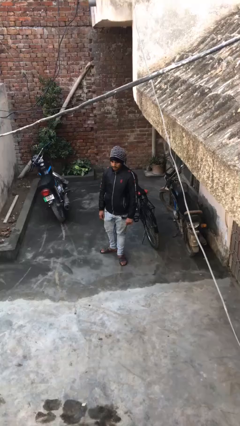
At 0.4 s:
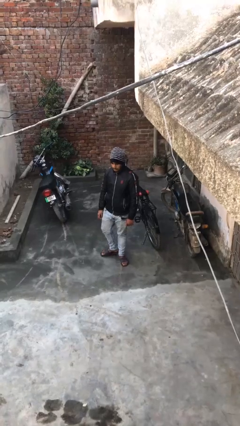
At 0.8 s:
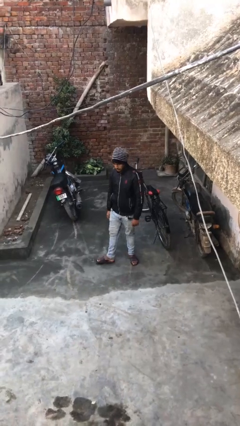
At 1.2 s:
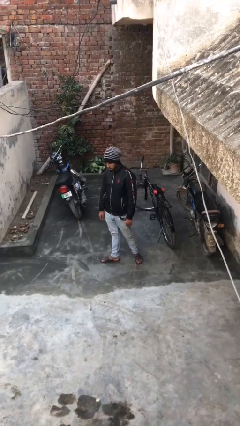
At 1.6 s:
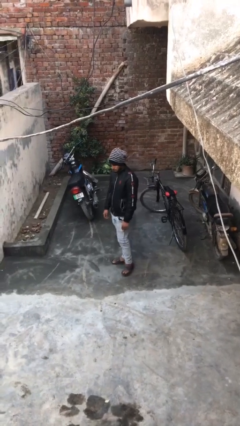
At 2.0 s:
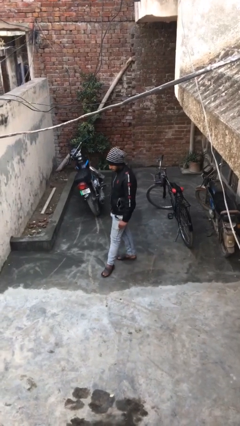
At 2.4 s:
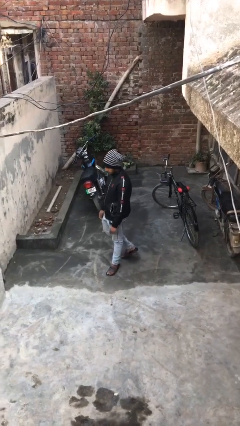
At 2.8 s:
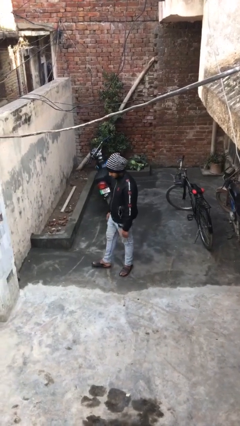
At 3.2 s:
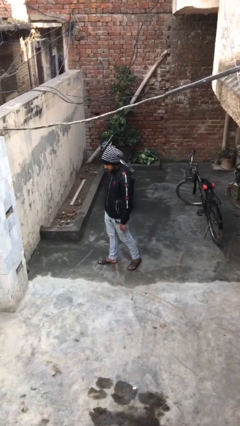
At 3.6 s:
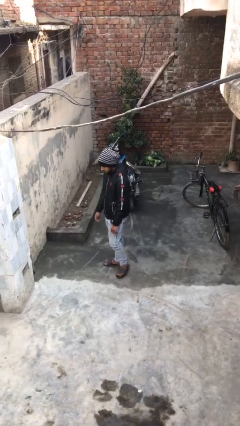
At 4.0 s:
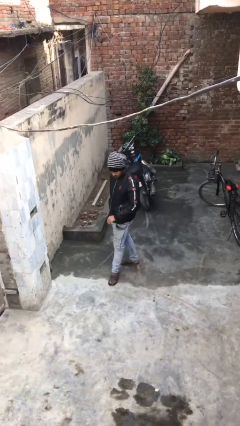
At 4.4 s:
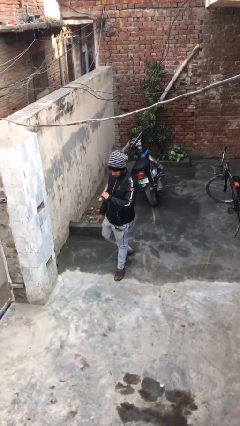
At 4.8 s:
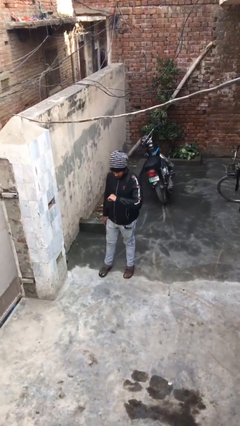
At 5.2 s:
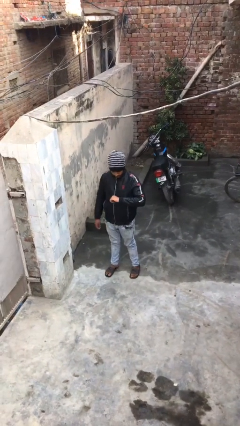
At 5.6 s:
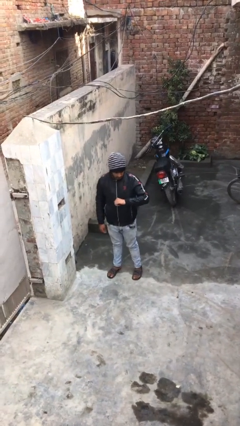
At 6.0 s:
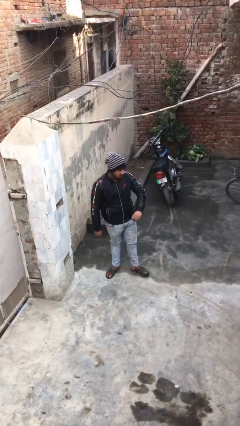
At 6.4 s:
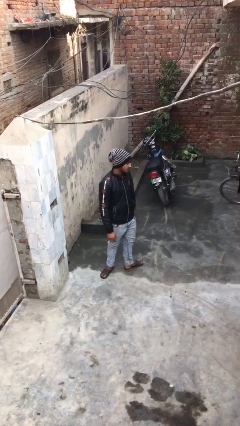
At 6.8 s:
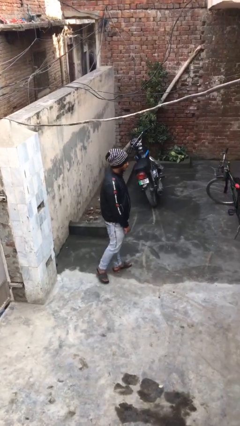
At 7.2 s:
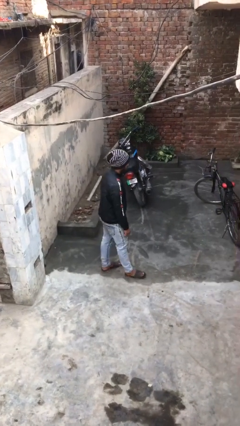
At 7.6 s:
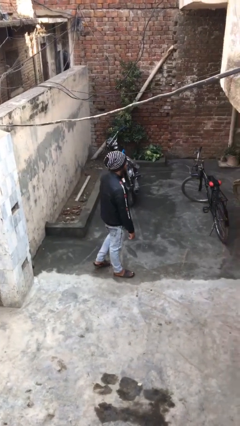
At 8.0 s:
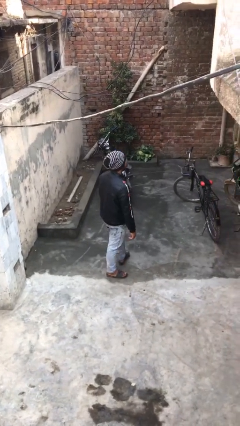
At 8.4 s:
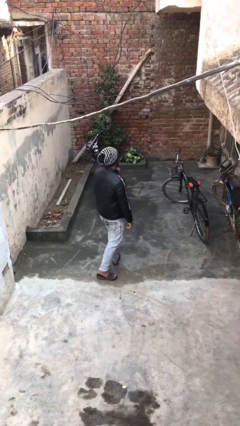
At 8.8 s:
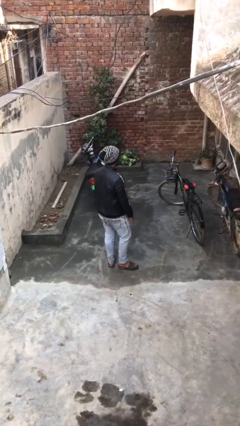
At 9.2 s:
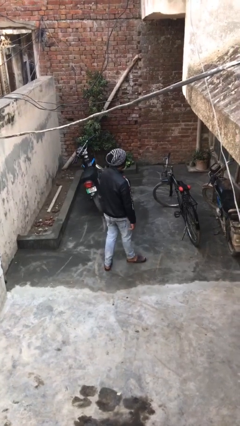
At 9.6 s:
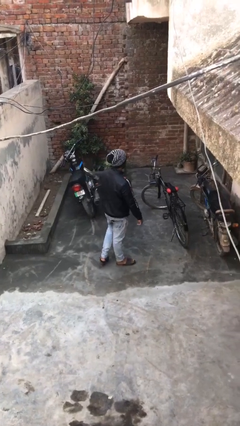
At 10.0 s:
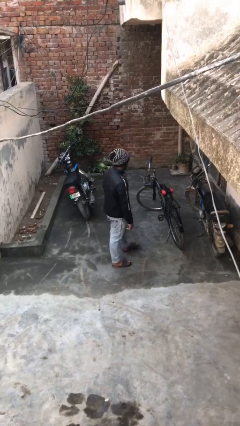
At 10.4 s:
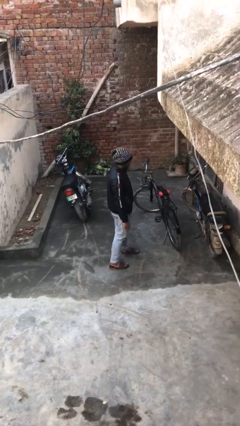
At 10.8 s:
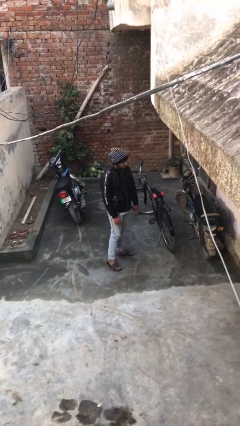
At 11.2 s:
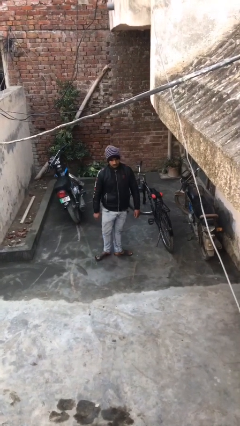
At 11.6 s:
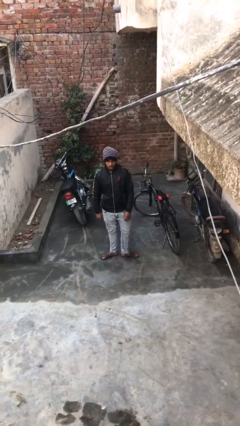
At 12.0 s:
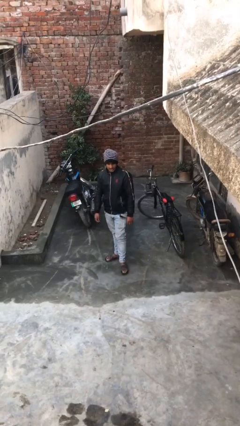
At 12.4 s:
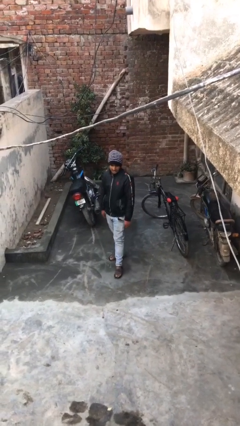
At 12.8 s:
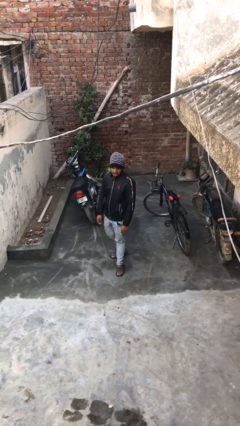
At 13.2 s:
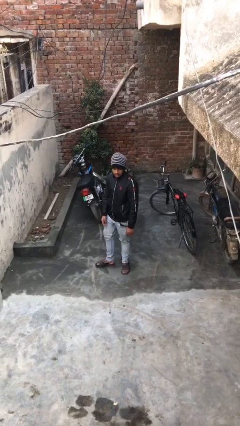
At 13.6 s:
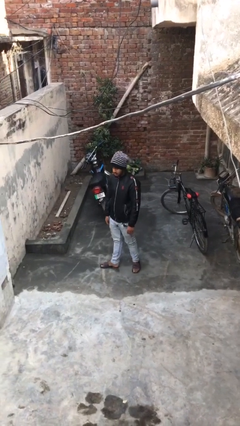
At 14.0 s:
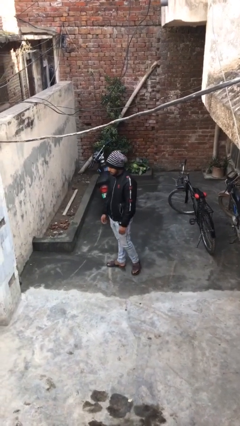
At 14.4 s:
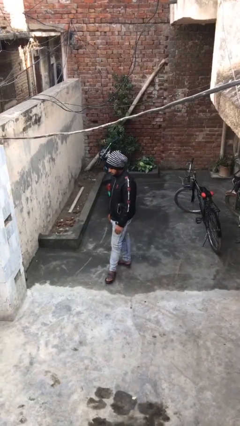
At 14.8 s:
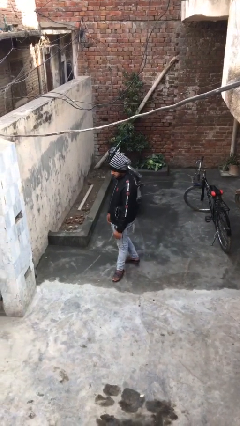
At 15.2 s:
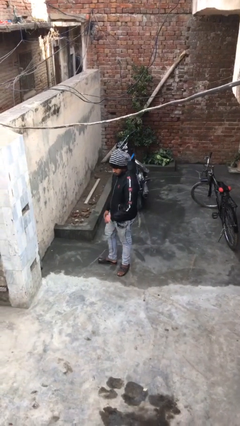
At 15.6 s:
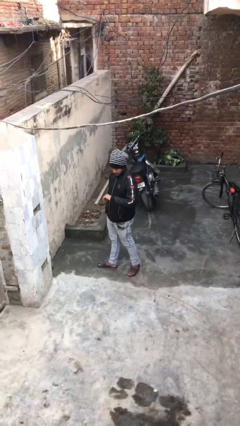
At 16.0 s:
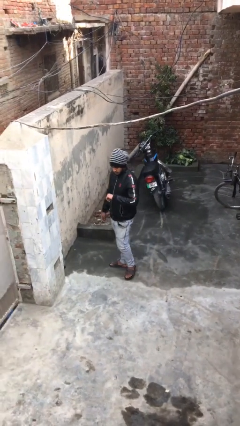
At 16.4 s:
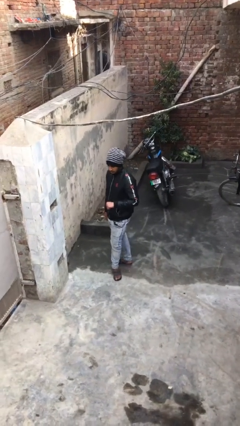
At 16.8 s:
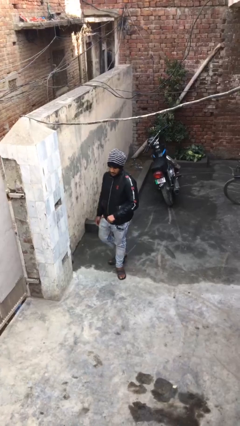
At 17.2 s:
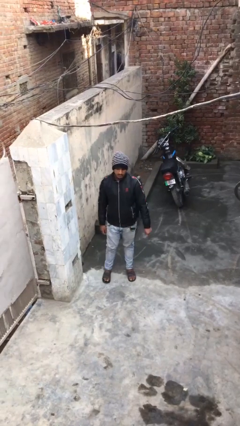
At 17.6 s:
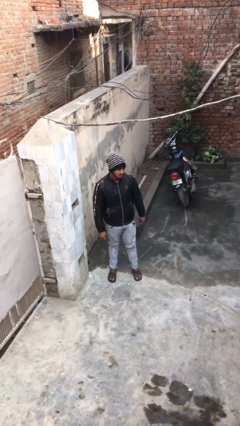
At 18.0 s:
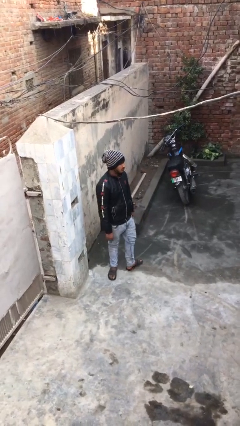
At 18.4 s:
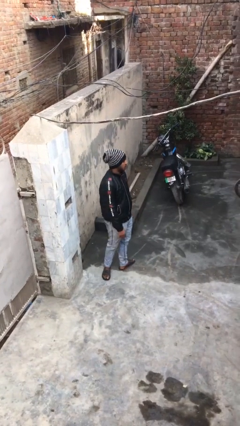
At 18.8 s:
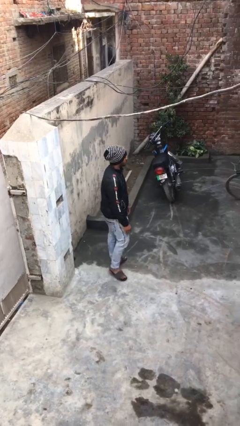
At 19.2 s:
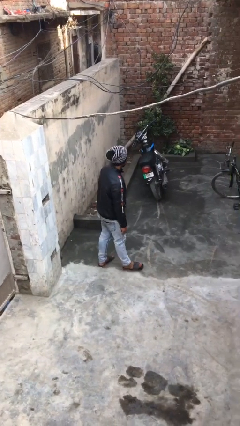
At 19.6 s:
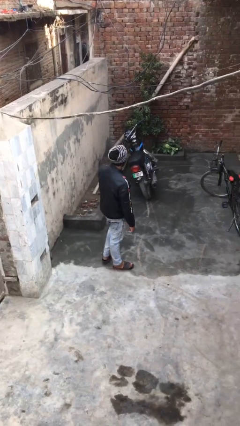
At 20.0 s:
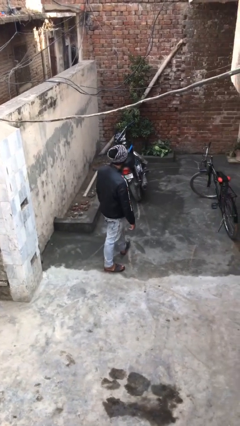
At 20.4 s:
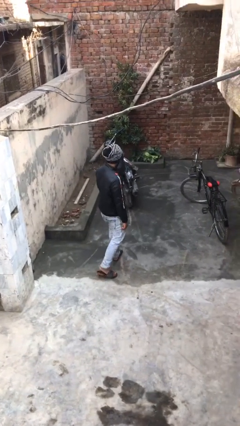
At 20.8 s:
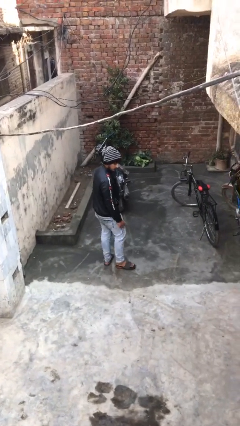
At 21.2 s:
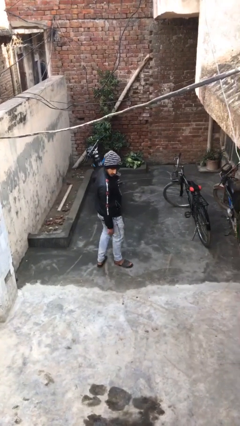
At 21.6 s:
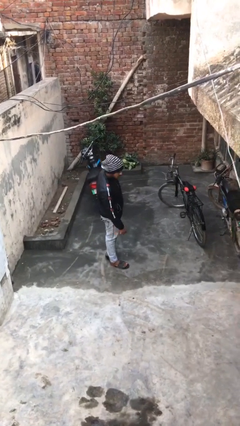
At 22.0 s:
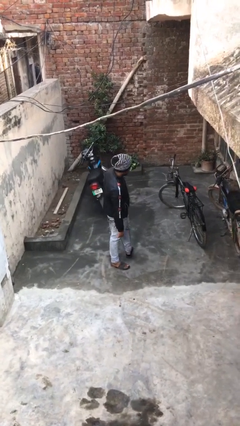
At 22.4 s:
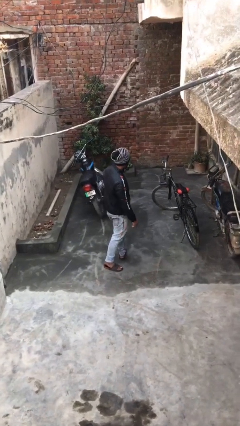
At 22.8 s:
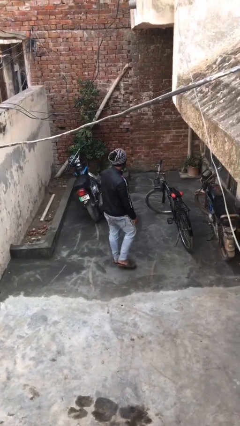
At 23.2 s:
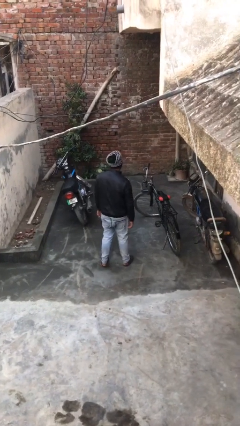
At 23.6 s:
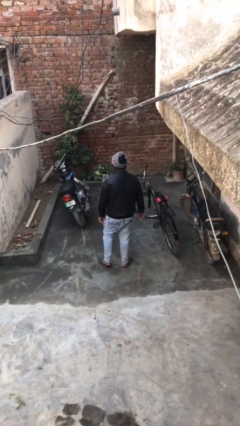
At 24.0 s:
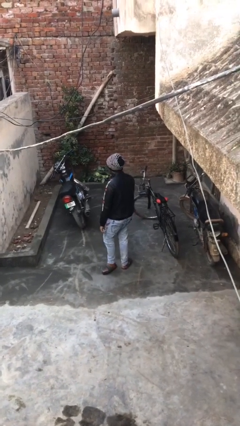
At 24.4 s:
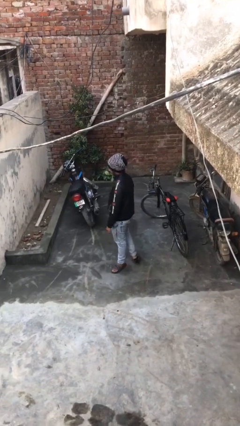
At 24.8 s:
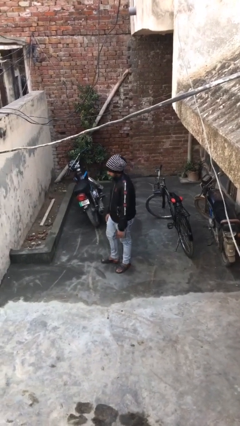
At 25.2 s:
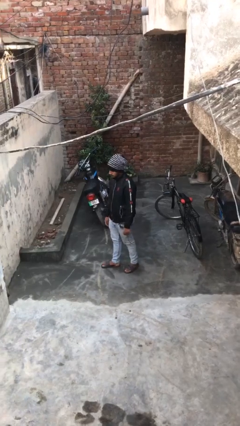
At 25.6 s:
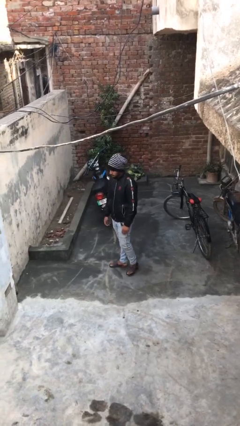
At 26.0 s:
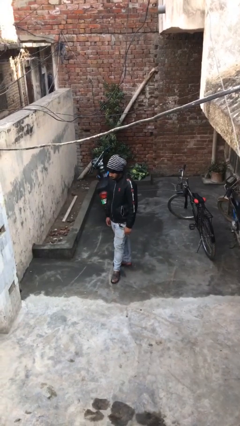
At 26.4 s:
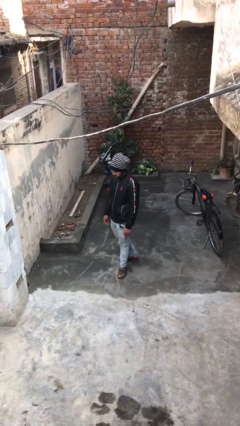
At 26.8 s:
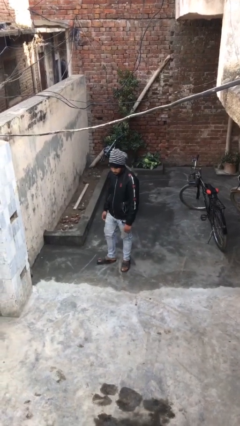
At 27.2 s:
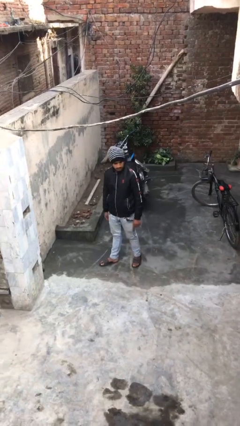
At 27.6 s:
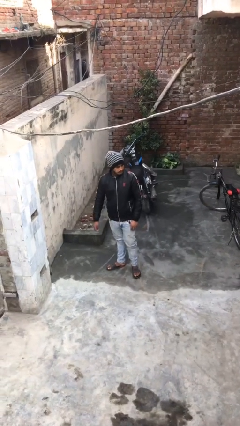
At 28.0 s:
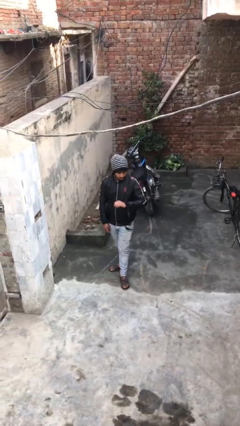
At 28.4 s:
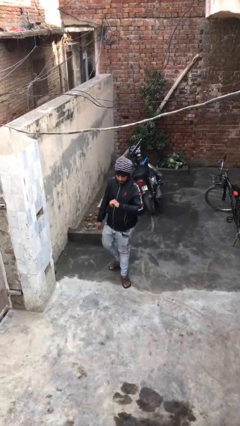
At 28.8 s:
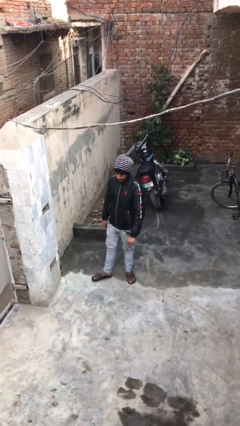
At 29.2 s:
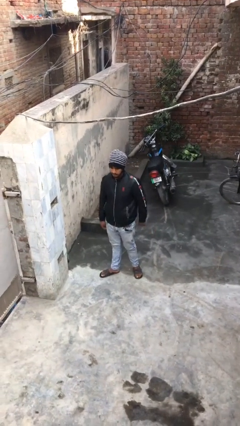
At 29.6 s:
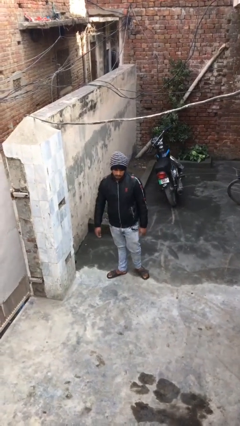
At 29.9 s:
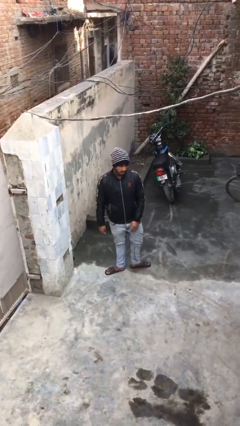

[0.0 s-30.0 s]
person walks

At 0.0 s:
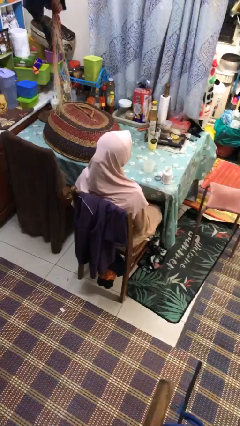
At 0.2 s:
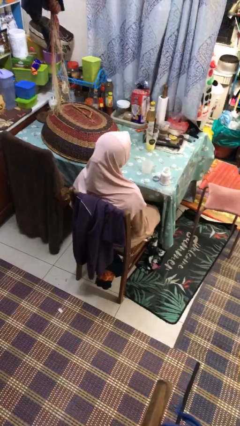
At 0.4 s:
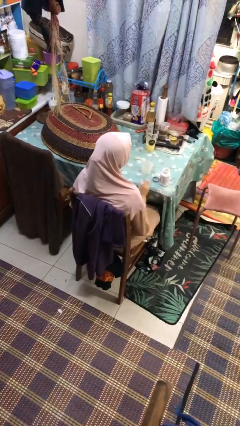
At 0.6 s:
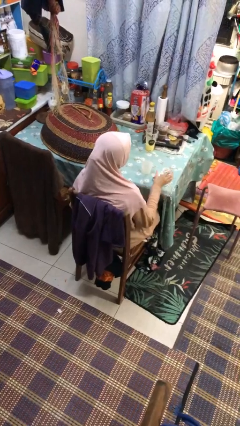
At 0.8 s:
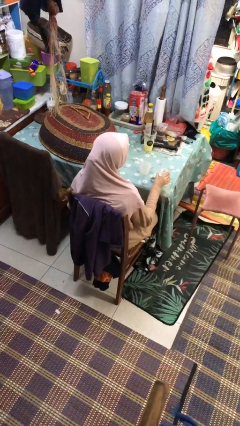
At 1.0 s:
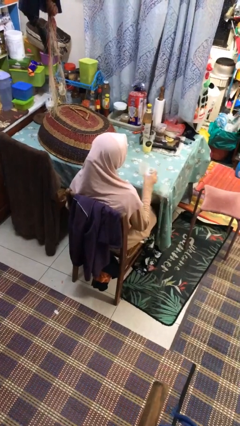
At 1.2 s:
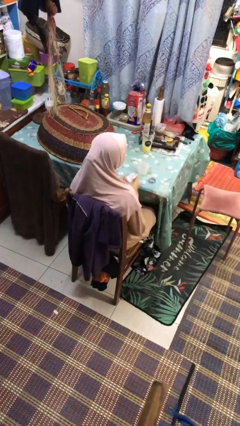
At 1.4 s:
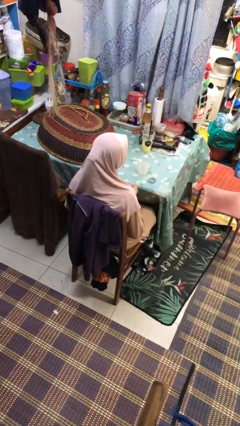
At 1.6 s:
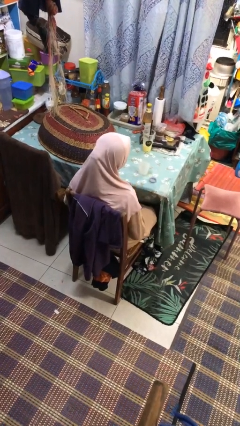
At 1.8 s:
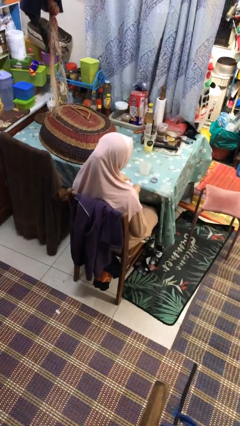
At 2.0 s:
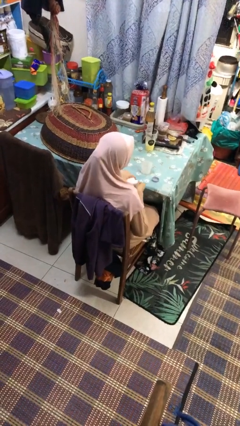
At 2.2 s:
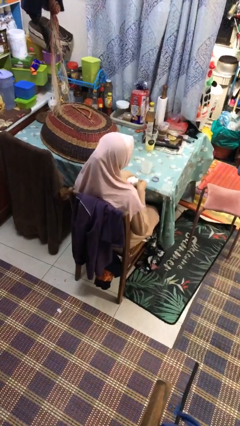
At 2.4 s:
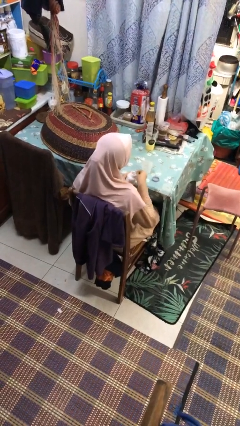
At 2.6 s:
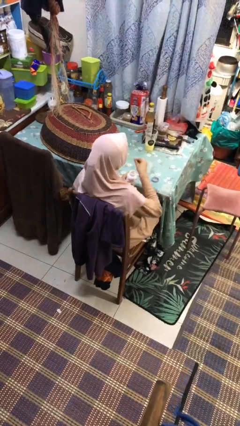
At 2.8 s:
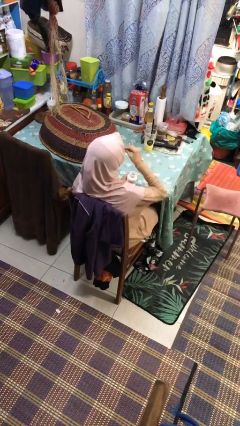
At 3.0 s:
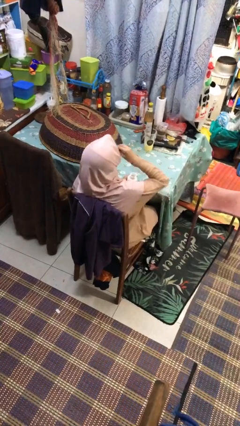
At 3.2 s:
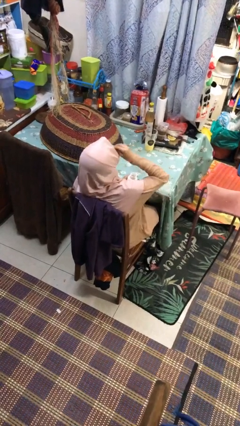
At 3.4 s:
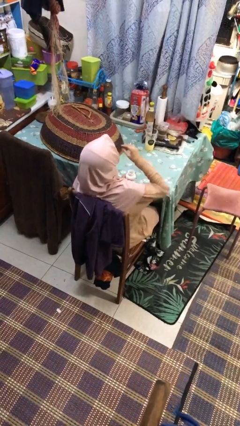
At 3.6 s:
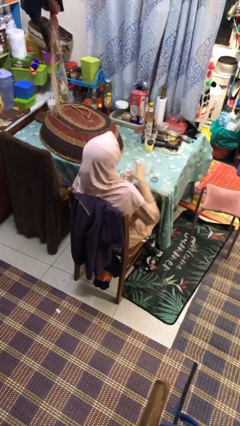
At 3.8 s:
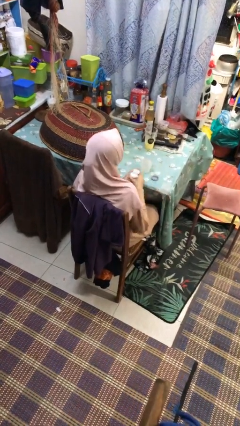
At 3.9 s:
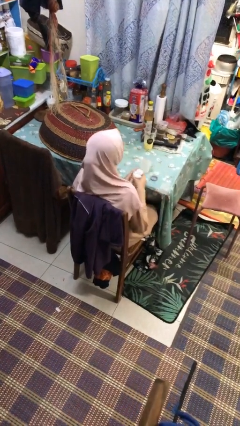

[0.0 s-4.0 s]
person takes medicine pills
